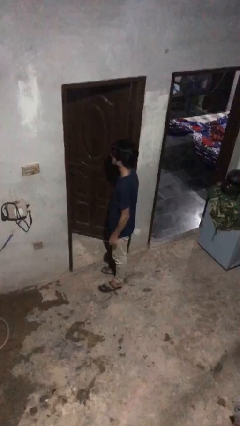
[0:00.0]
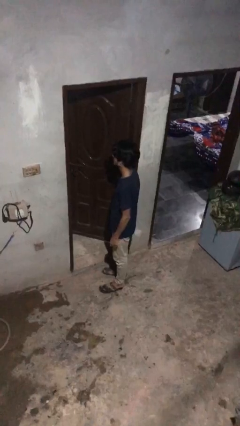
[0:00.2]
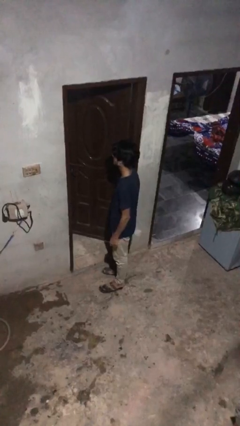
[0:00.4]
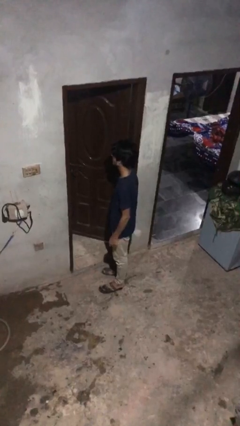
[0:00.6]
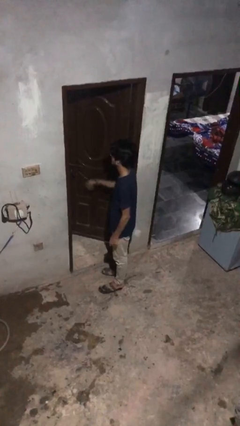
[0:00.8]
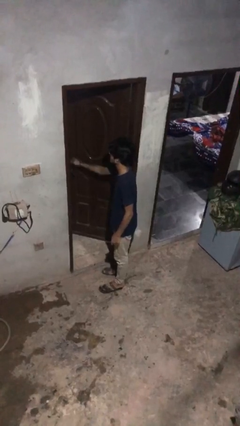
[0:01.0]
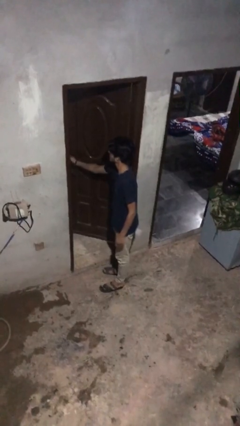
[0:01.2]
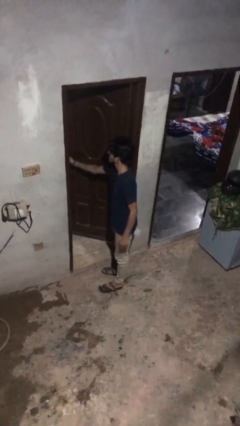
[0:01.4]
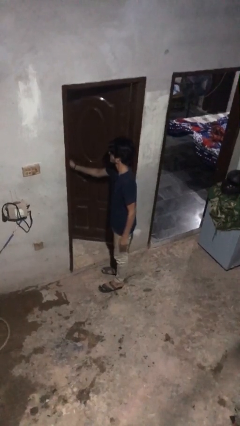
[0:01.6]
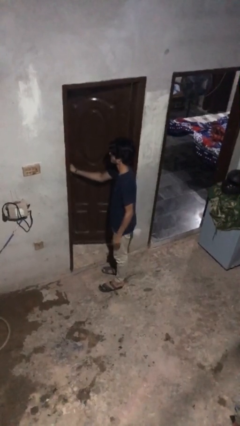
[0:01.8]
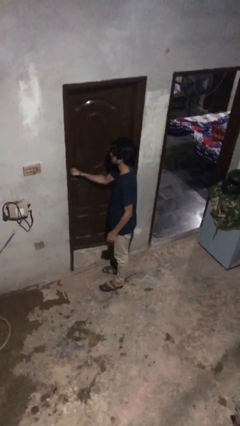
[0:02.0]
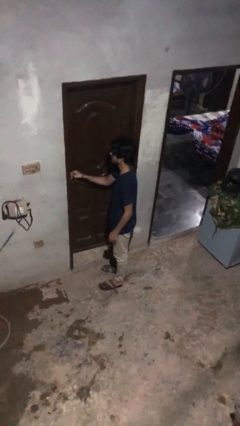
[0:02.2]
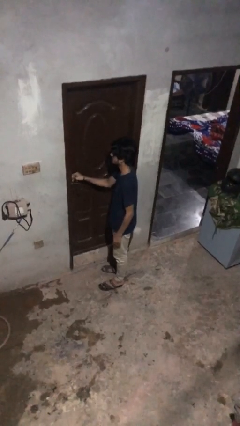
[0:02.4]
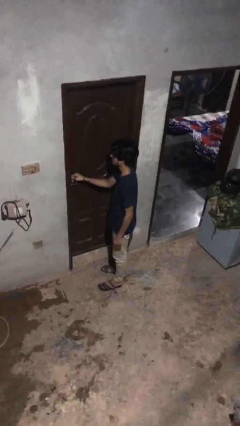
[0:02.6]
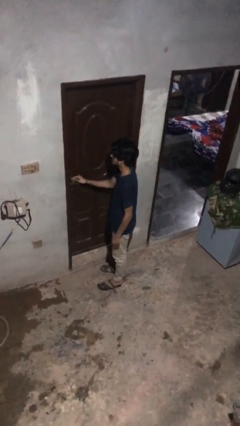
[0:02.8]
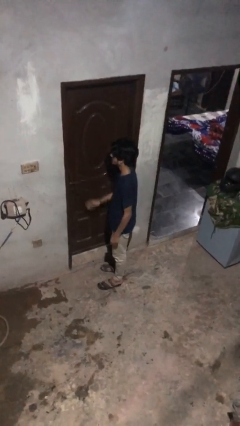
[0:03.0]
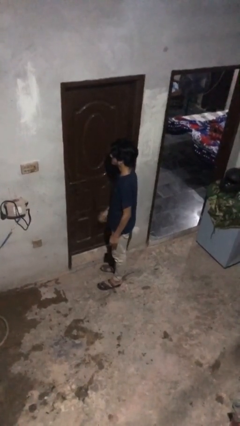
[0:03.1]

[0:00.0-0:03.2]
person closes facility door

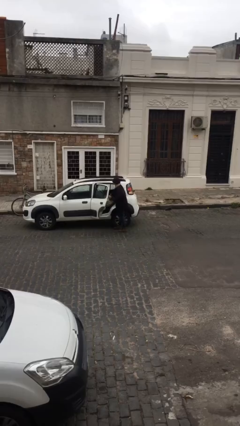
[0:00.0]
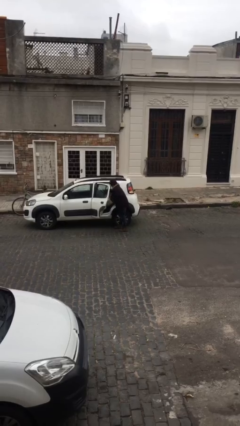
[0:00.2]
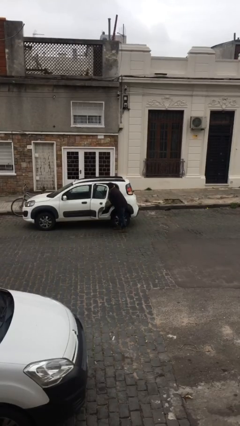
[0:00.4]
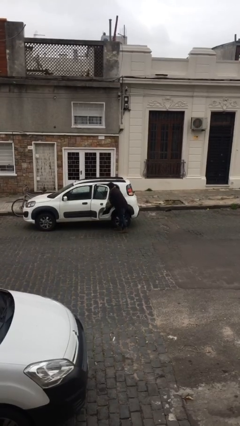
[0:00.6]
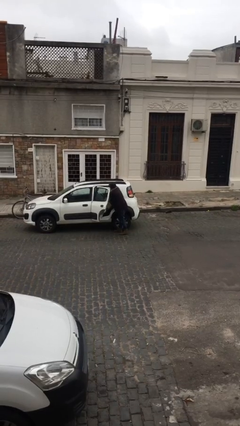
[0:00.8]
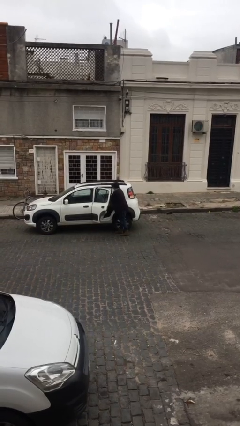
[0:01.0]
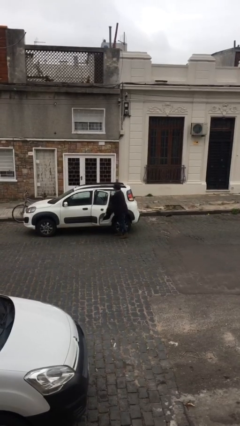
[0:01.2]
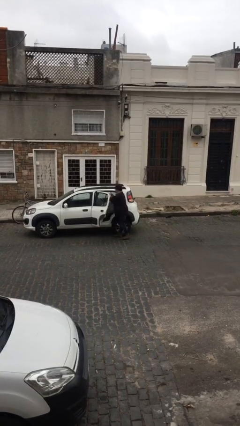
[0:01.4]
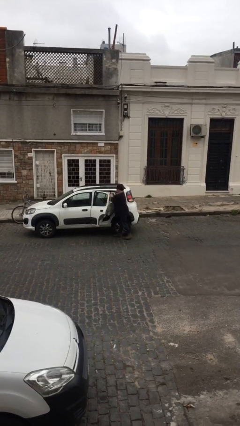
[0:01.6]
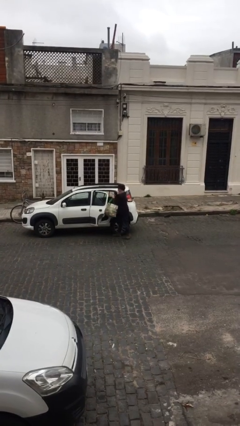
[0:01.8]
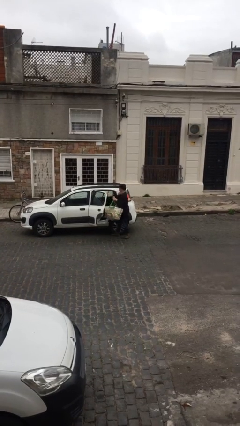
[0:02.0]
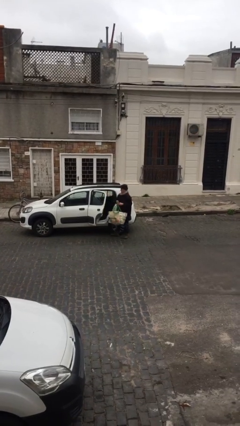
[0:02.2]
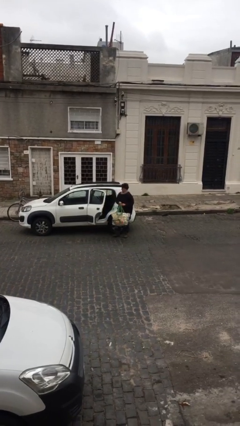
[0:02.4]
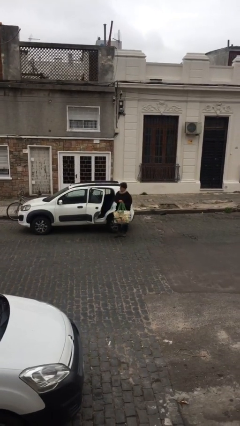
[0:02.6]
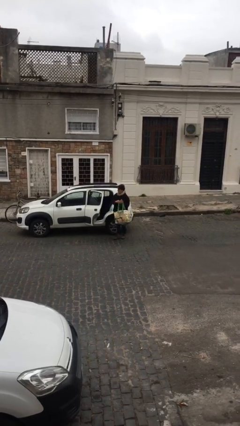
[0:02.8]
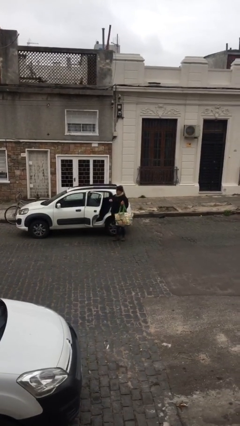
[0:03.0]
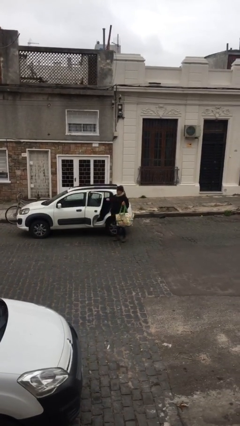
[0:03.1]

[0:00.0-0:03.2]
person unloads car

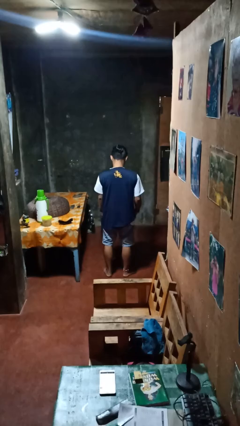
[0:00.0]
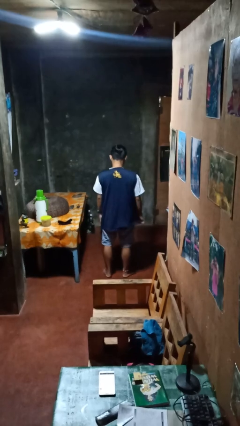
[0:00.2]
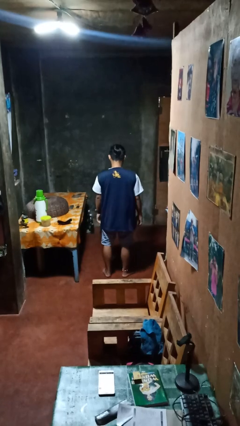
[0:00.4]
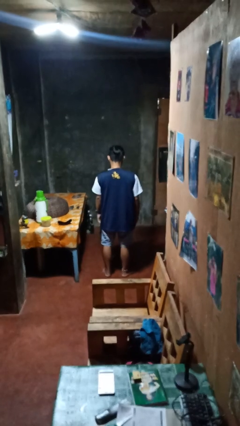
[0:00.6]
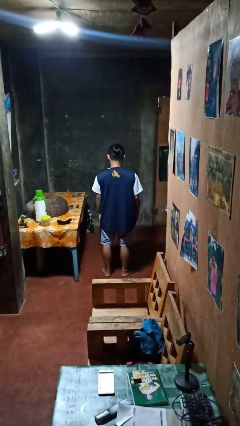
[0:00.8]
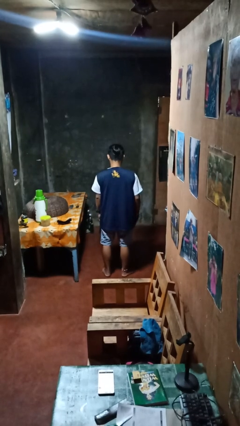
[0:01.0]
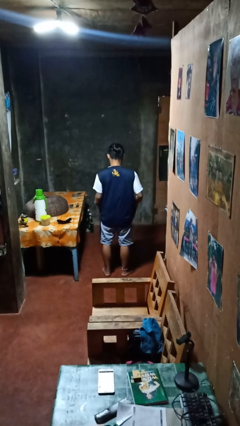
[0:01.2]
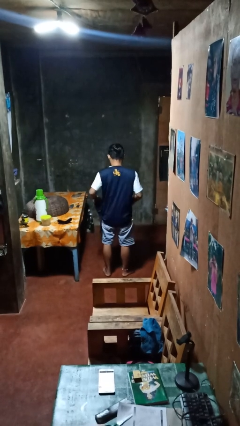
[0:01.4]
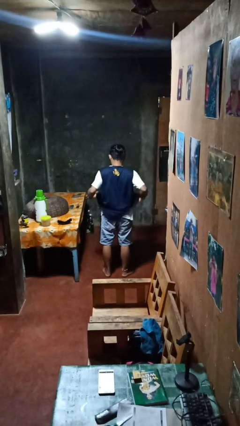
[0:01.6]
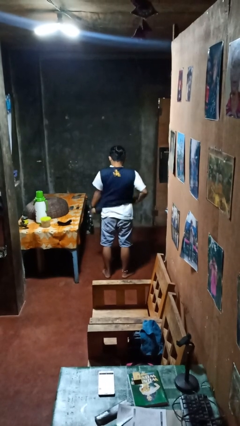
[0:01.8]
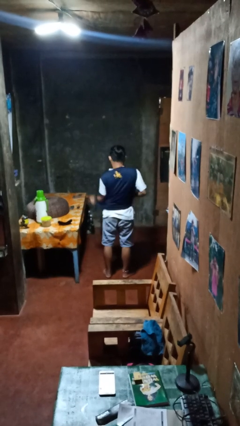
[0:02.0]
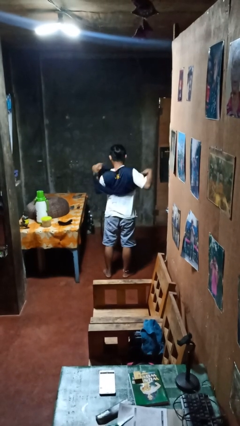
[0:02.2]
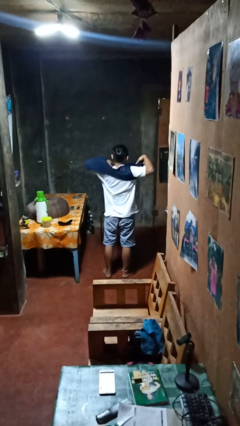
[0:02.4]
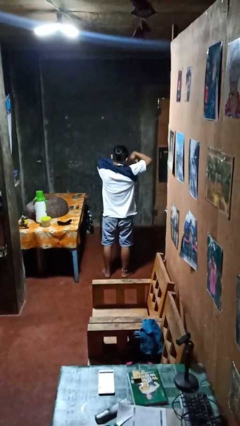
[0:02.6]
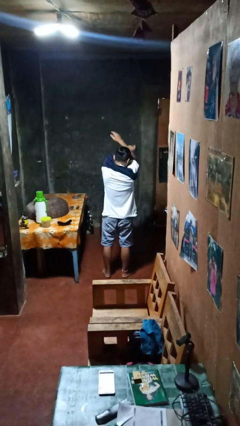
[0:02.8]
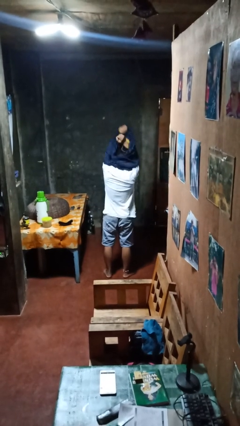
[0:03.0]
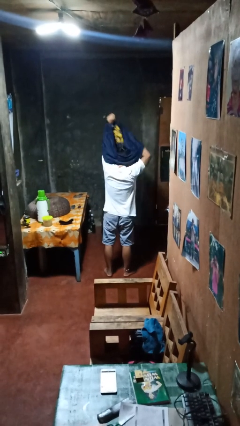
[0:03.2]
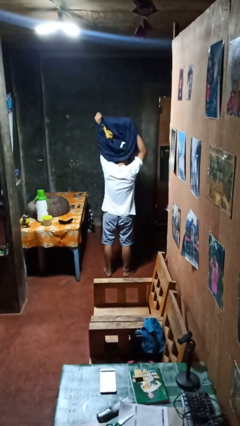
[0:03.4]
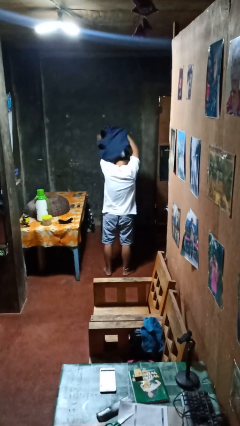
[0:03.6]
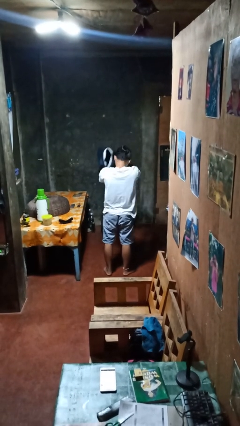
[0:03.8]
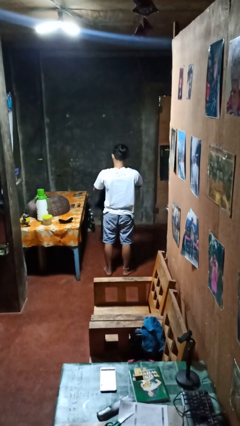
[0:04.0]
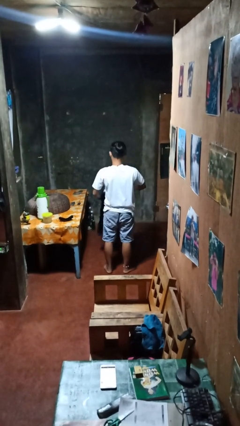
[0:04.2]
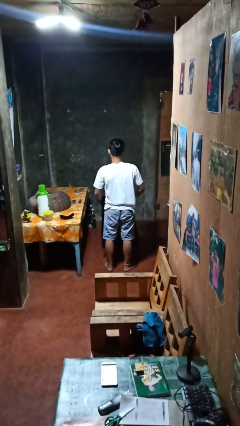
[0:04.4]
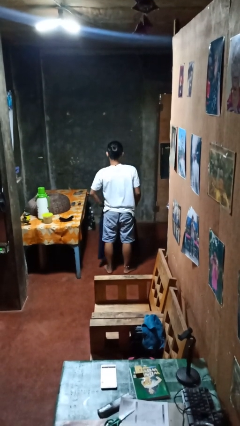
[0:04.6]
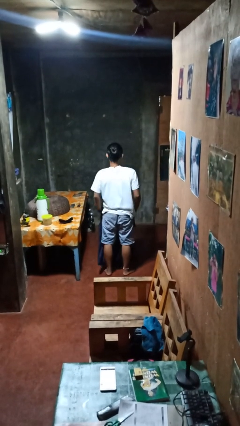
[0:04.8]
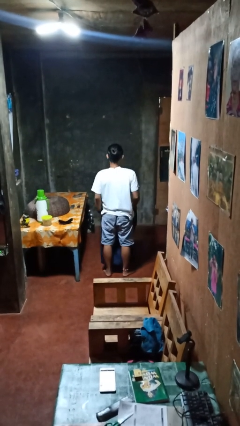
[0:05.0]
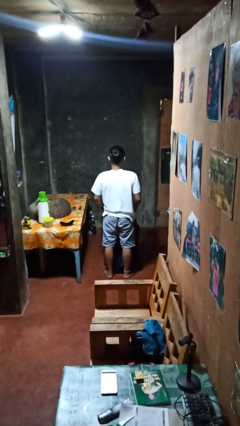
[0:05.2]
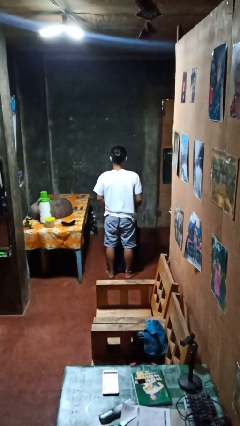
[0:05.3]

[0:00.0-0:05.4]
person takes off shirt

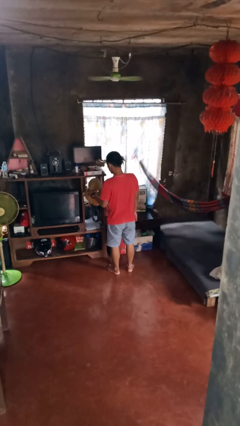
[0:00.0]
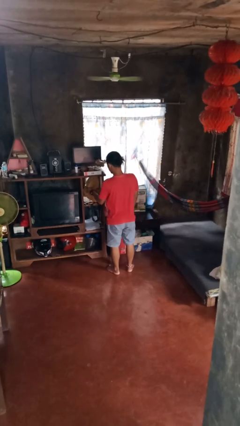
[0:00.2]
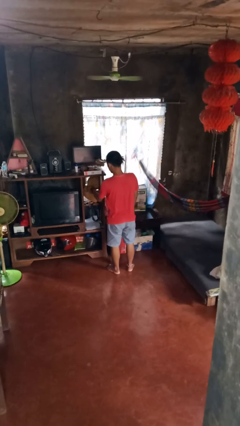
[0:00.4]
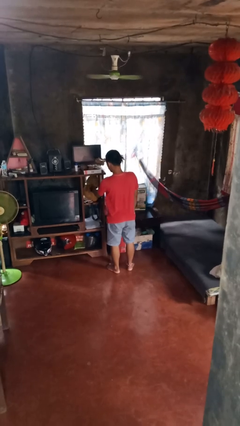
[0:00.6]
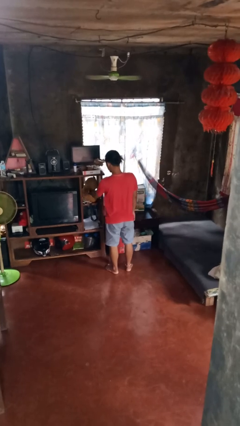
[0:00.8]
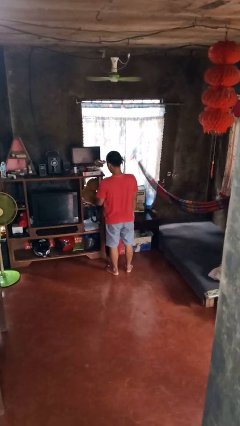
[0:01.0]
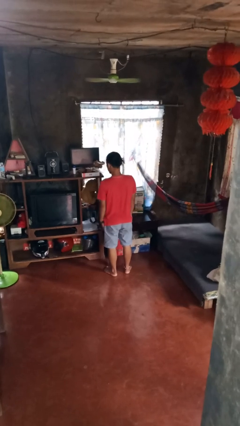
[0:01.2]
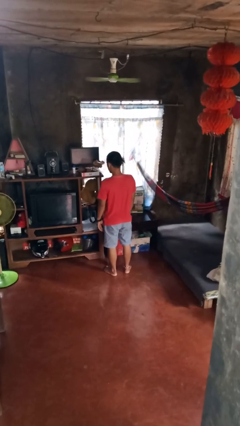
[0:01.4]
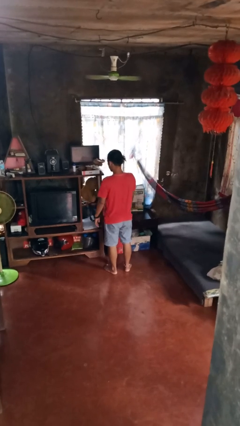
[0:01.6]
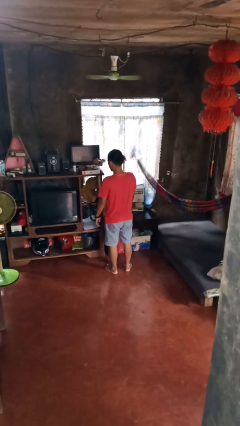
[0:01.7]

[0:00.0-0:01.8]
person puts down object into cabinet

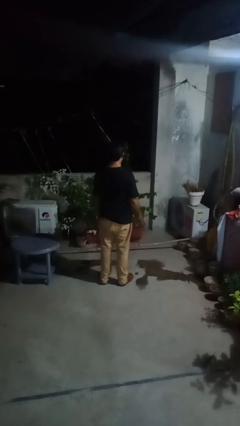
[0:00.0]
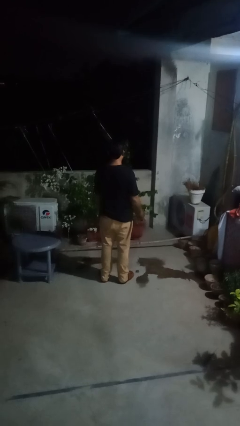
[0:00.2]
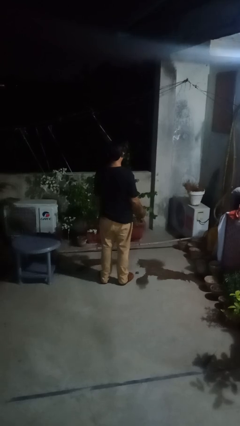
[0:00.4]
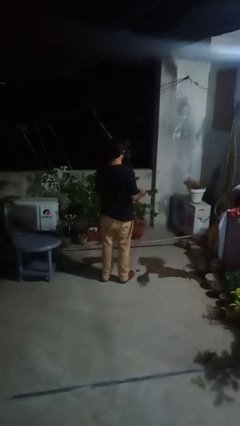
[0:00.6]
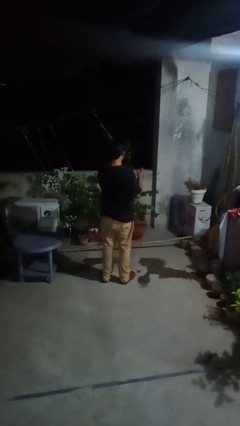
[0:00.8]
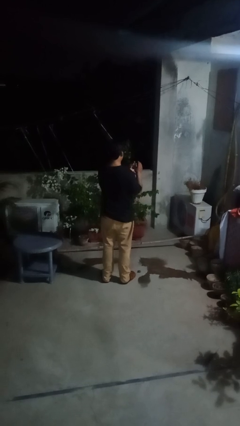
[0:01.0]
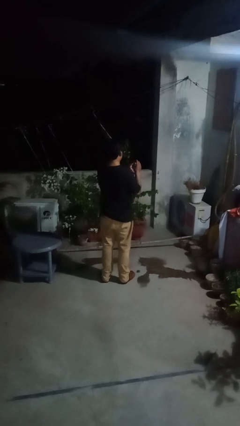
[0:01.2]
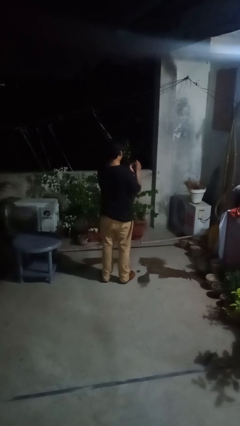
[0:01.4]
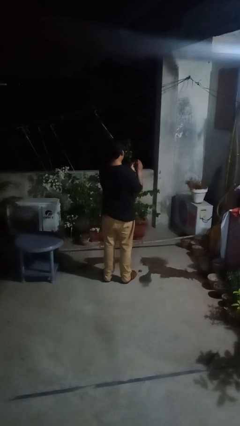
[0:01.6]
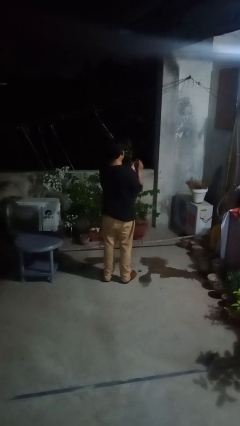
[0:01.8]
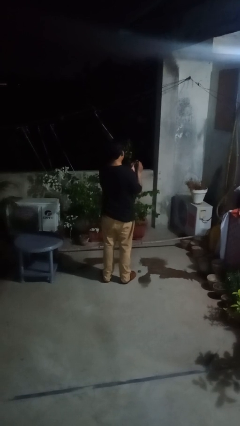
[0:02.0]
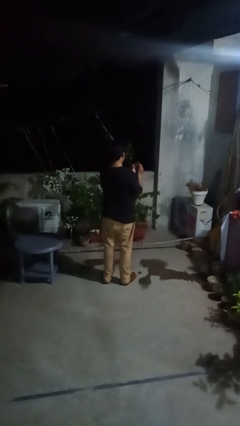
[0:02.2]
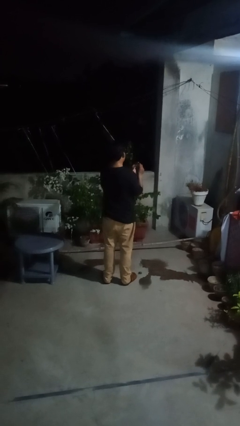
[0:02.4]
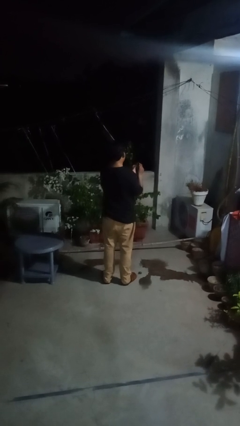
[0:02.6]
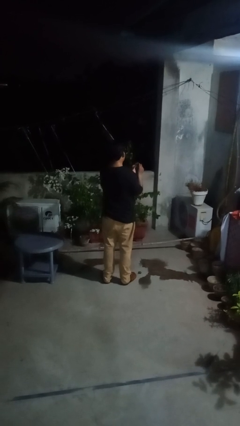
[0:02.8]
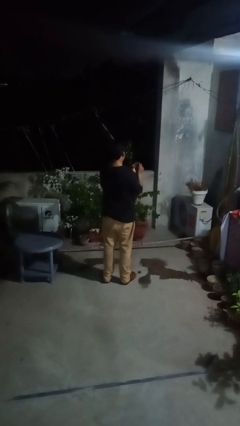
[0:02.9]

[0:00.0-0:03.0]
person clips fingernails

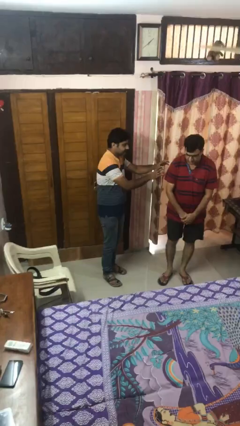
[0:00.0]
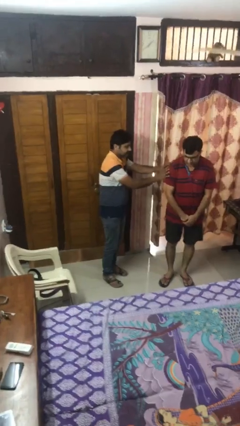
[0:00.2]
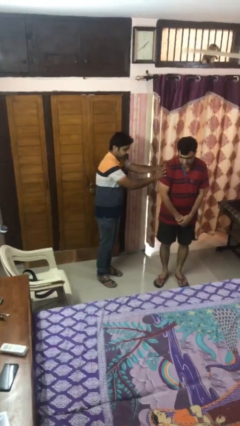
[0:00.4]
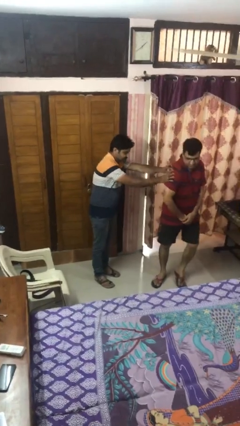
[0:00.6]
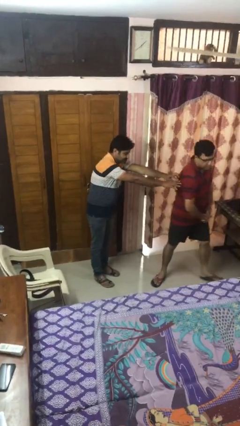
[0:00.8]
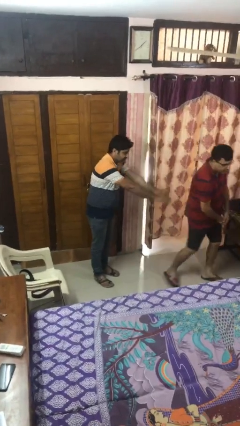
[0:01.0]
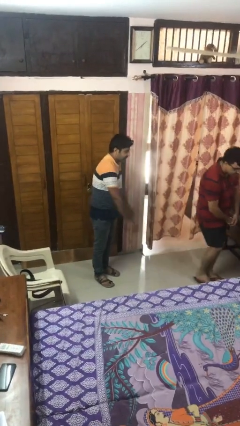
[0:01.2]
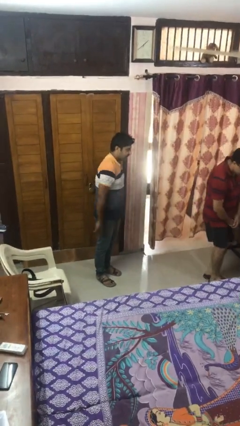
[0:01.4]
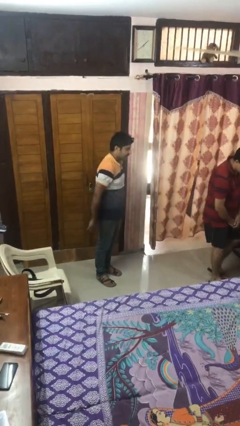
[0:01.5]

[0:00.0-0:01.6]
person shoves person
